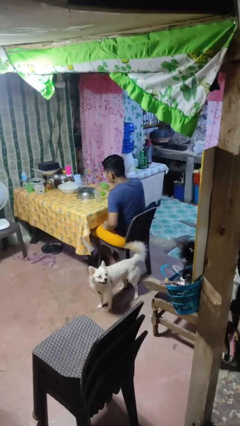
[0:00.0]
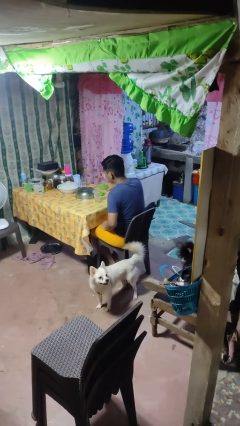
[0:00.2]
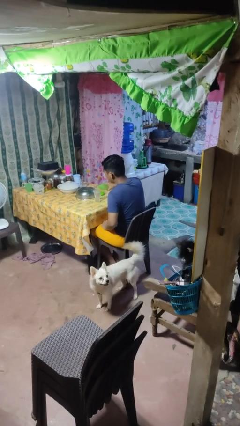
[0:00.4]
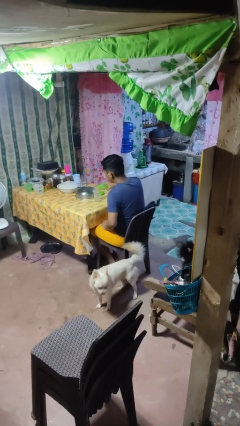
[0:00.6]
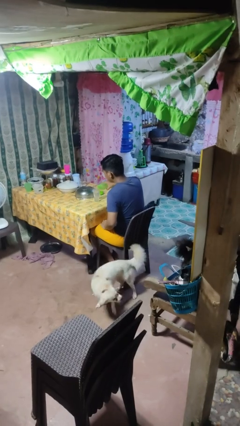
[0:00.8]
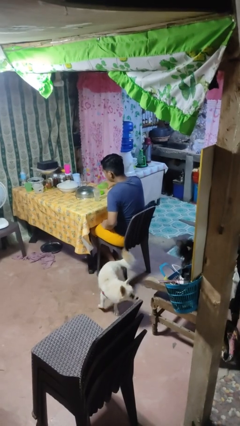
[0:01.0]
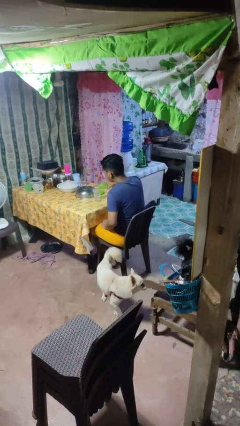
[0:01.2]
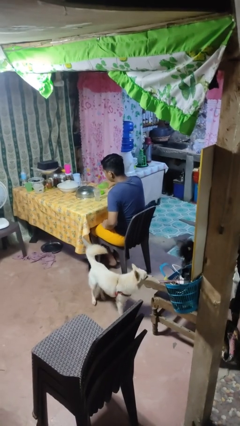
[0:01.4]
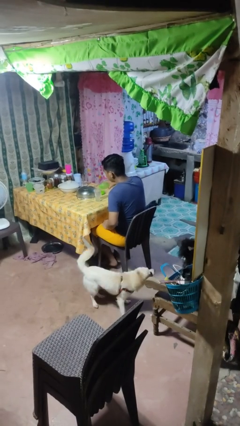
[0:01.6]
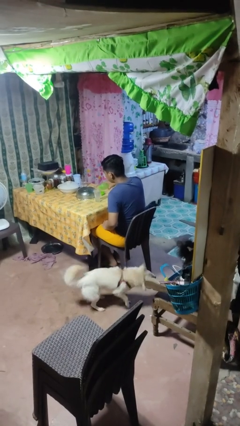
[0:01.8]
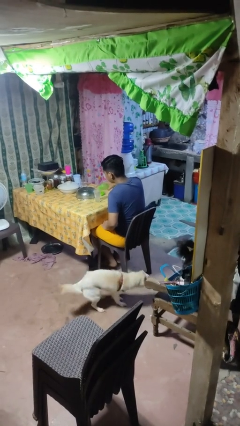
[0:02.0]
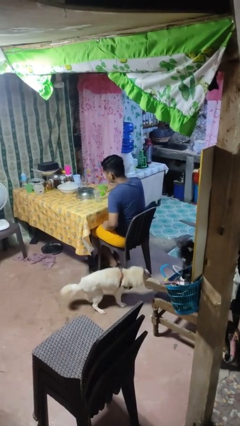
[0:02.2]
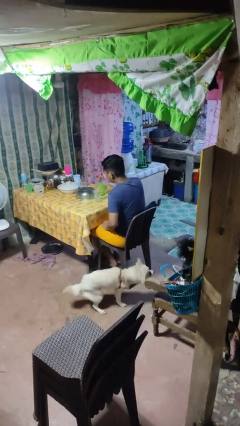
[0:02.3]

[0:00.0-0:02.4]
person pours liquid into cup

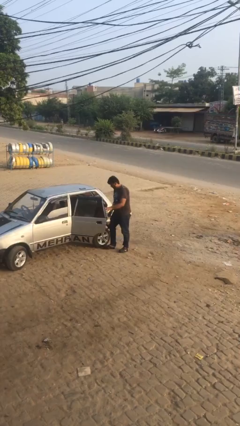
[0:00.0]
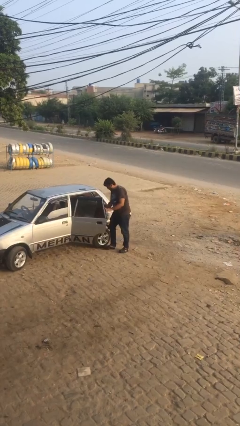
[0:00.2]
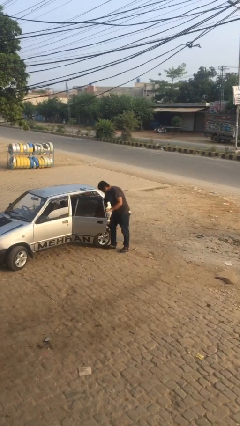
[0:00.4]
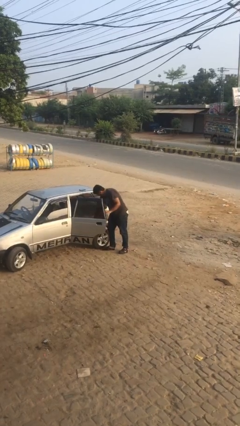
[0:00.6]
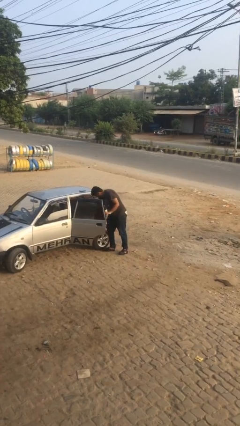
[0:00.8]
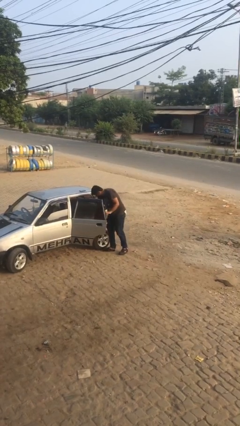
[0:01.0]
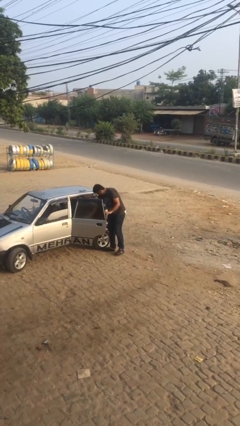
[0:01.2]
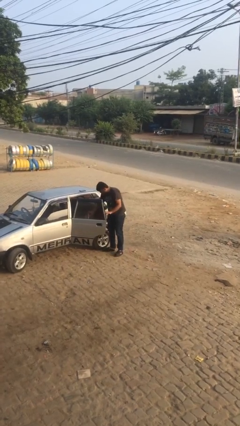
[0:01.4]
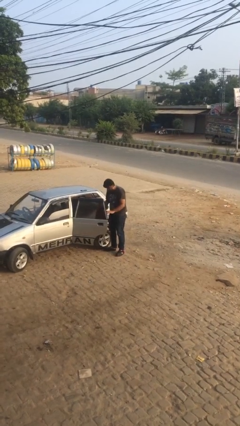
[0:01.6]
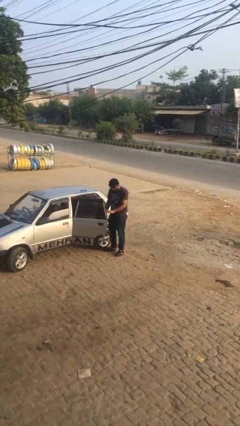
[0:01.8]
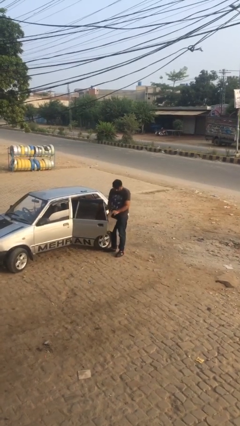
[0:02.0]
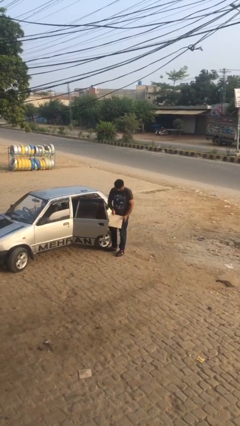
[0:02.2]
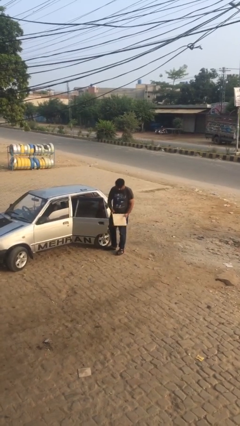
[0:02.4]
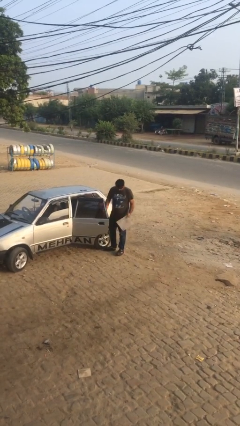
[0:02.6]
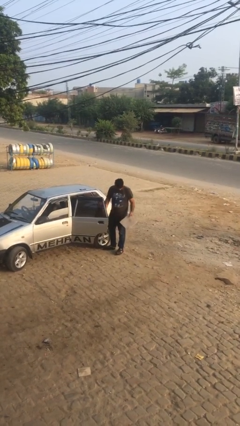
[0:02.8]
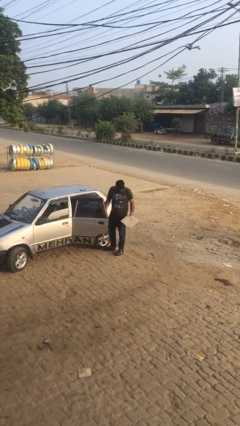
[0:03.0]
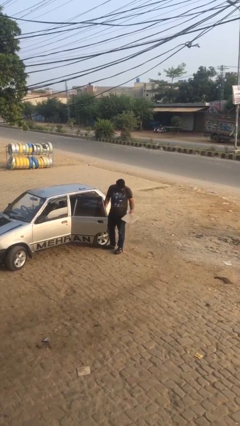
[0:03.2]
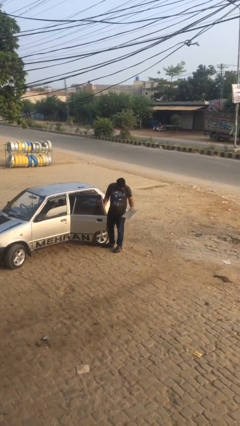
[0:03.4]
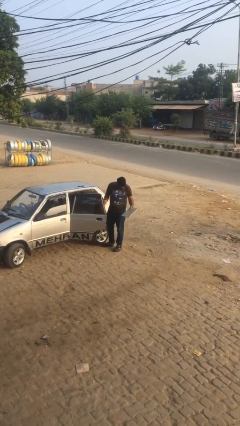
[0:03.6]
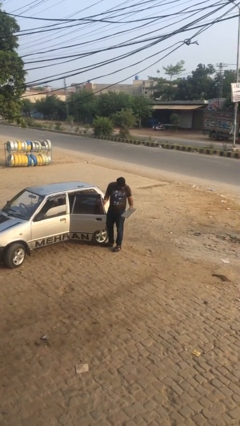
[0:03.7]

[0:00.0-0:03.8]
person unloads car

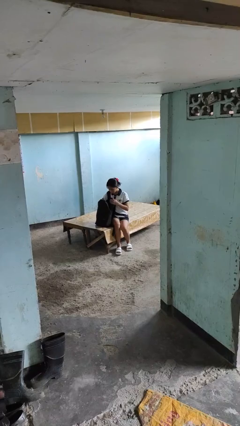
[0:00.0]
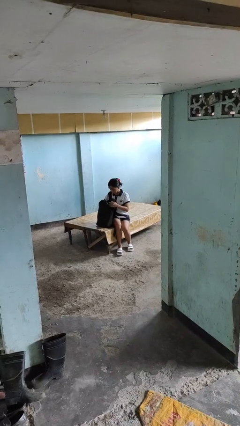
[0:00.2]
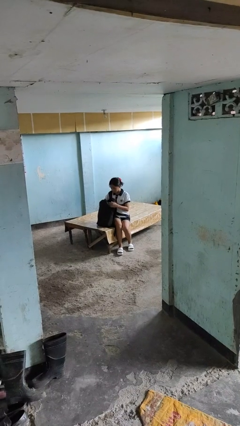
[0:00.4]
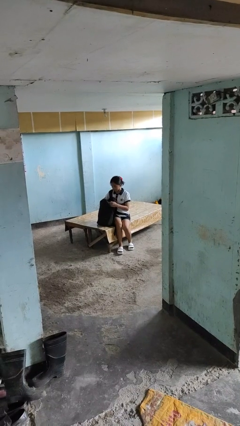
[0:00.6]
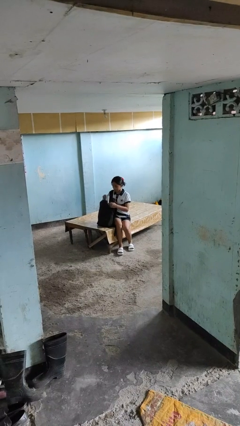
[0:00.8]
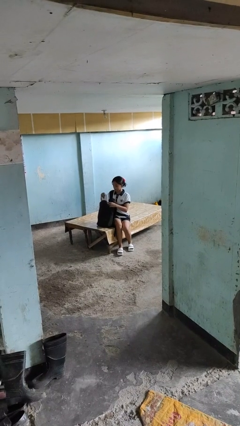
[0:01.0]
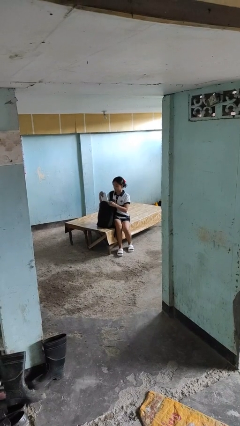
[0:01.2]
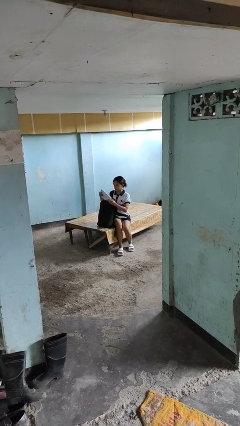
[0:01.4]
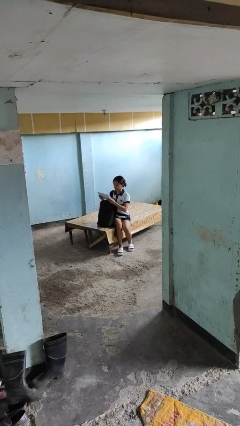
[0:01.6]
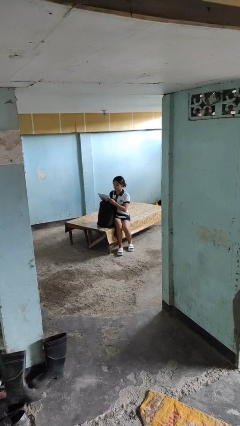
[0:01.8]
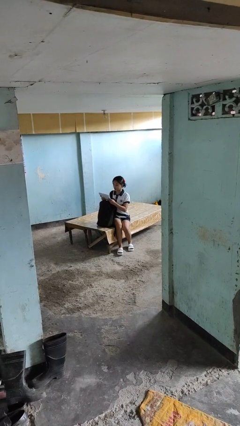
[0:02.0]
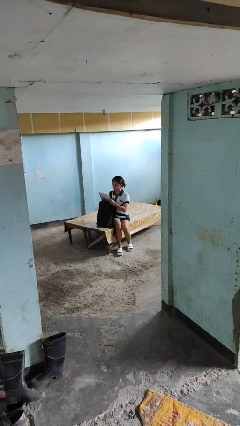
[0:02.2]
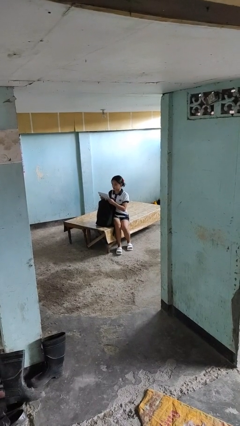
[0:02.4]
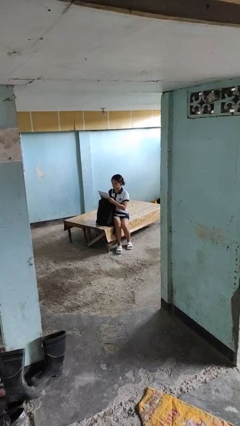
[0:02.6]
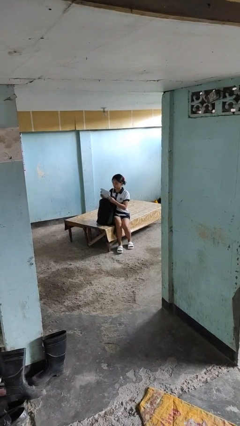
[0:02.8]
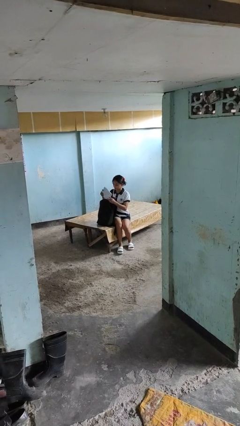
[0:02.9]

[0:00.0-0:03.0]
person takes object from backpack

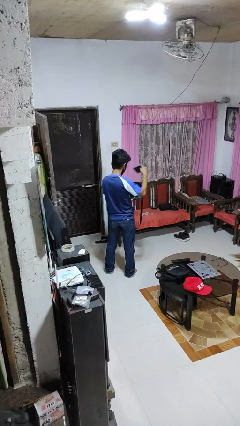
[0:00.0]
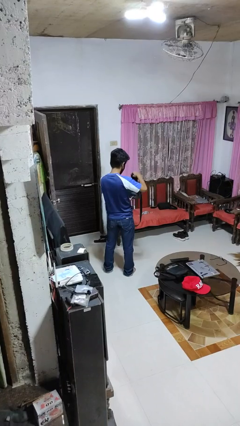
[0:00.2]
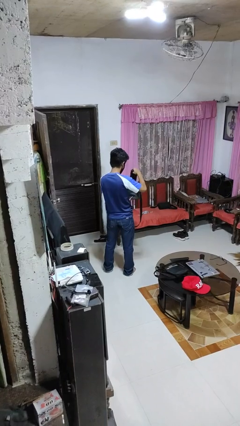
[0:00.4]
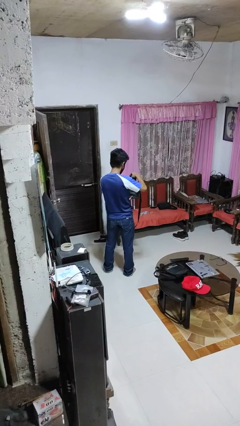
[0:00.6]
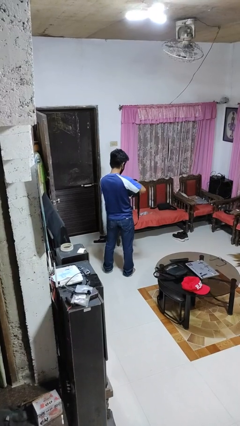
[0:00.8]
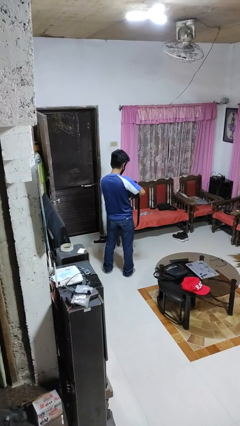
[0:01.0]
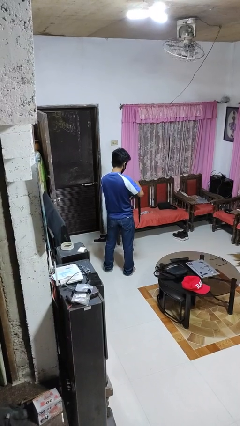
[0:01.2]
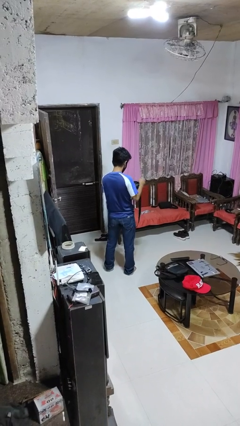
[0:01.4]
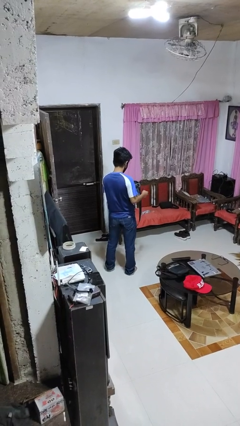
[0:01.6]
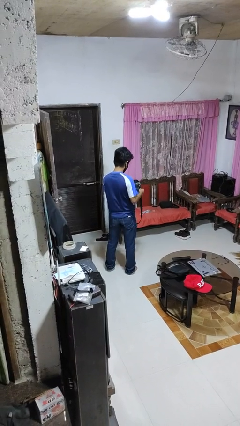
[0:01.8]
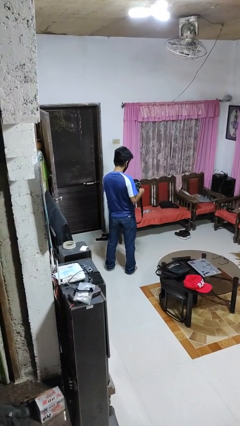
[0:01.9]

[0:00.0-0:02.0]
person puts object into purse

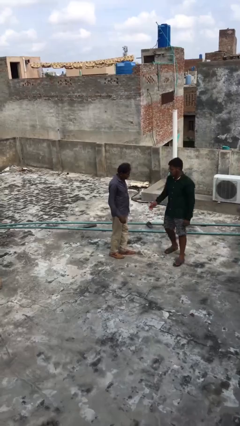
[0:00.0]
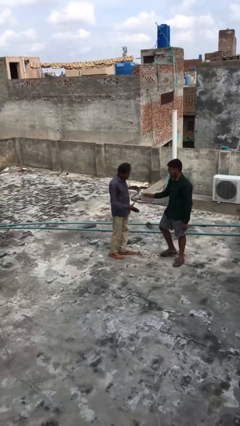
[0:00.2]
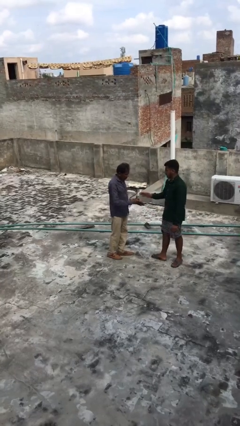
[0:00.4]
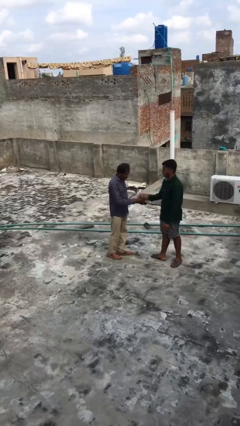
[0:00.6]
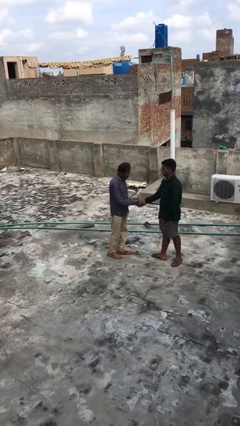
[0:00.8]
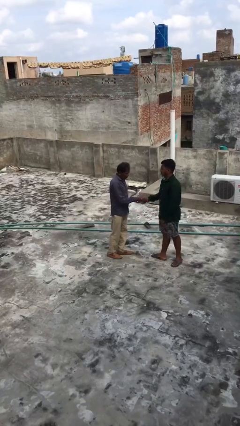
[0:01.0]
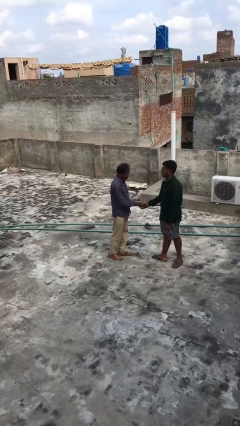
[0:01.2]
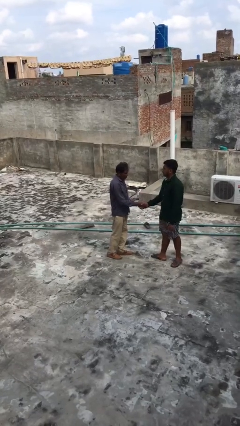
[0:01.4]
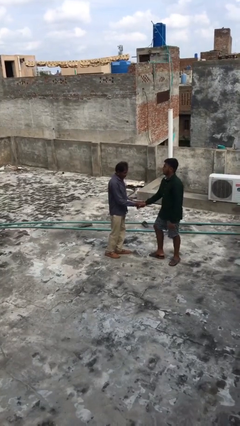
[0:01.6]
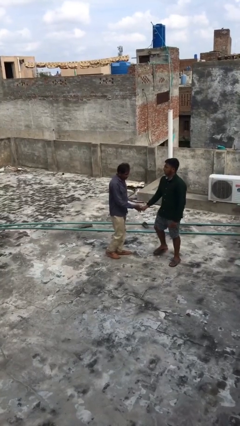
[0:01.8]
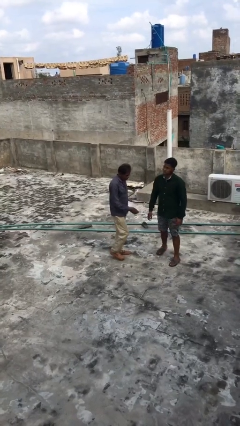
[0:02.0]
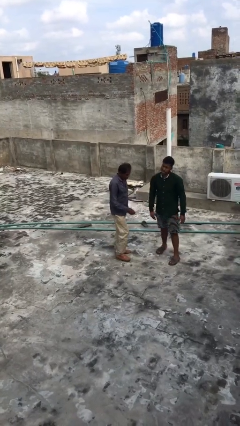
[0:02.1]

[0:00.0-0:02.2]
person shakes hand

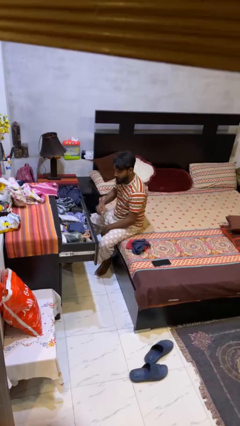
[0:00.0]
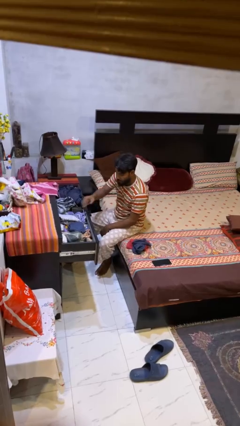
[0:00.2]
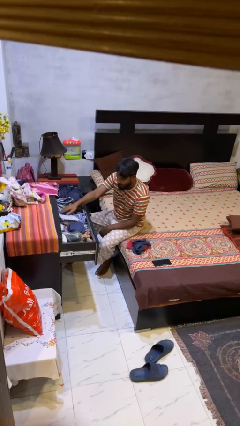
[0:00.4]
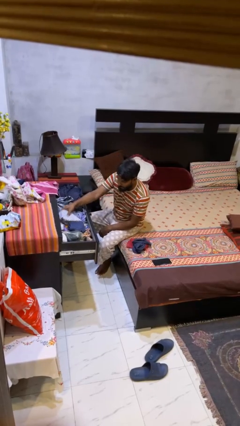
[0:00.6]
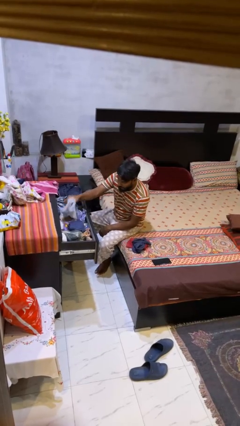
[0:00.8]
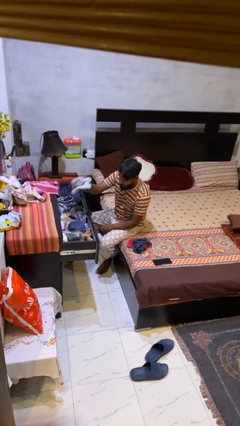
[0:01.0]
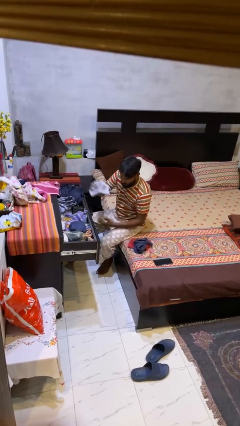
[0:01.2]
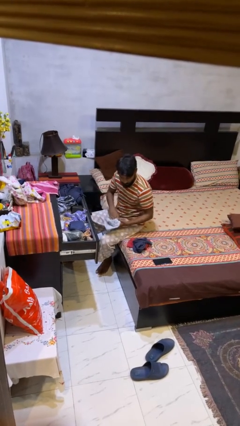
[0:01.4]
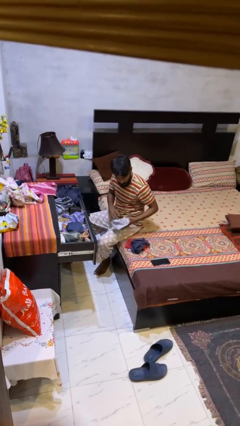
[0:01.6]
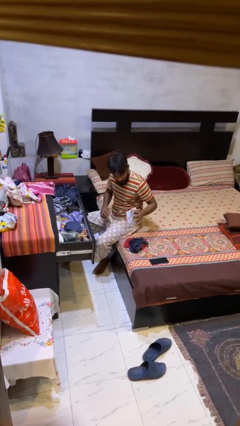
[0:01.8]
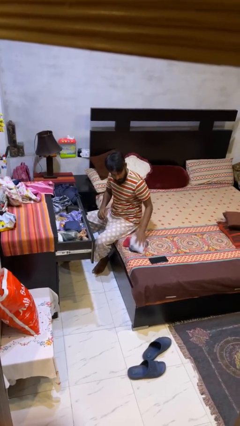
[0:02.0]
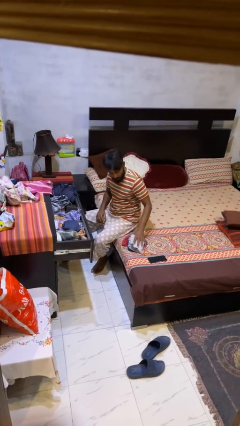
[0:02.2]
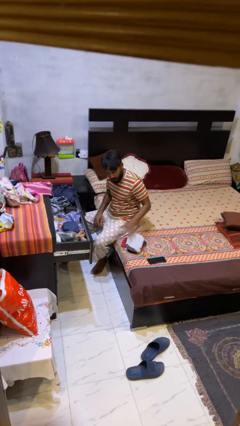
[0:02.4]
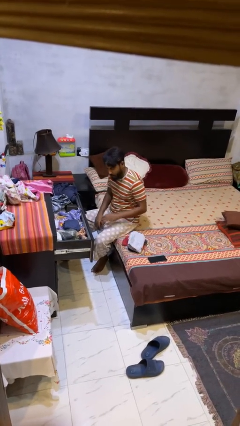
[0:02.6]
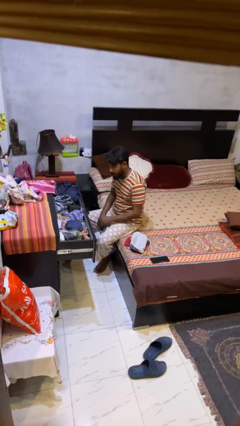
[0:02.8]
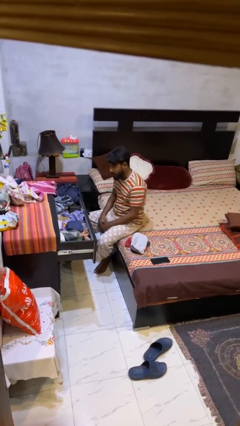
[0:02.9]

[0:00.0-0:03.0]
person takes clothes from dresser

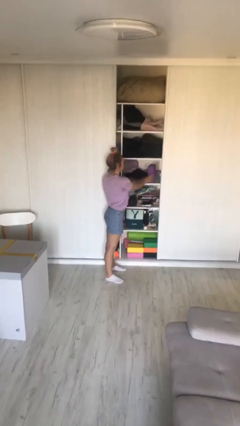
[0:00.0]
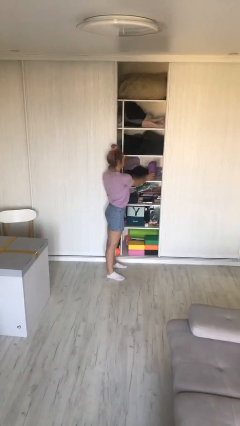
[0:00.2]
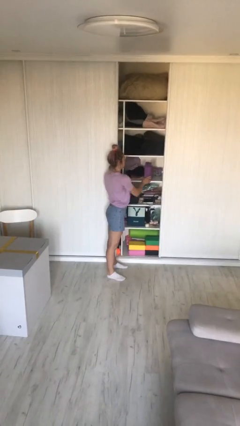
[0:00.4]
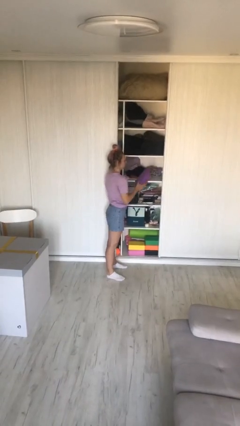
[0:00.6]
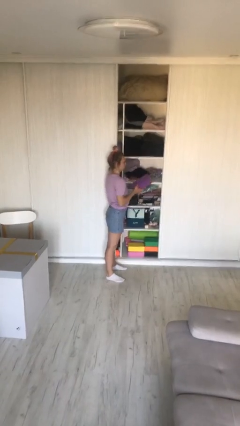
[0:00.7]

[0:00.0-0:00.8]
person picks up object from cabinet
